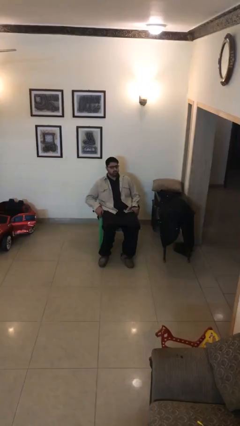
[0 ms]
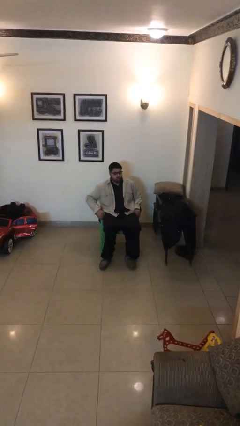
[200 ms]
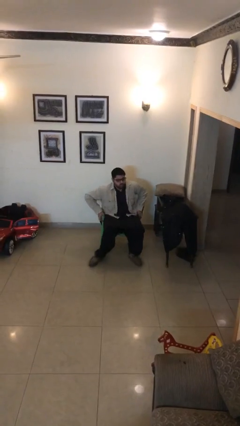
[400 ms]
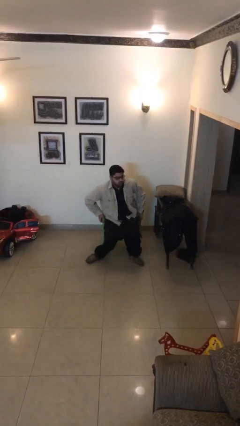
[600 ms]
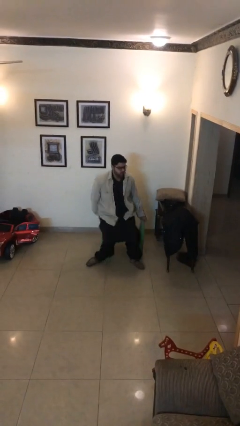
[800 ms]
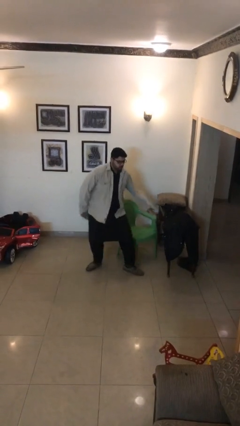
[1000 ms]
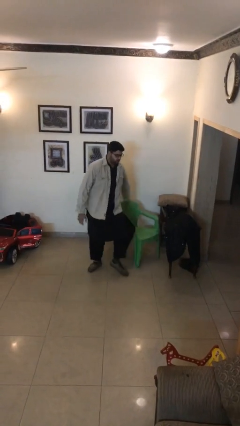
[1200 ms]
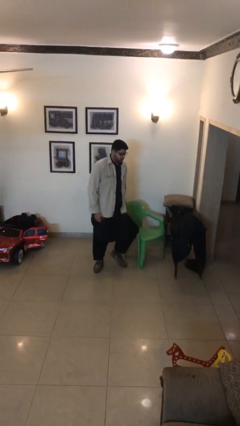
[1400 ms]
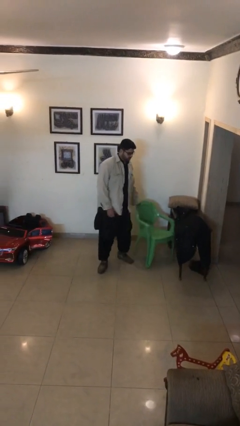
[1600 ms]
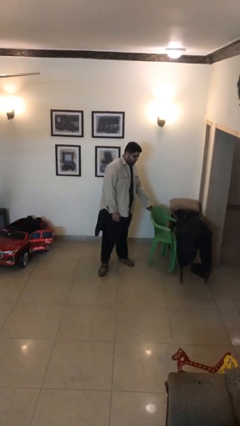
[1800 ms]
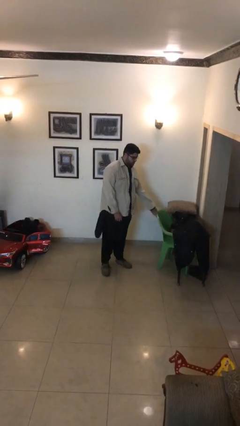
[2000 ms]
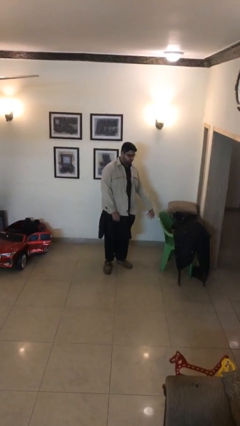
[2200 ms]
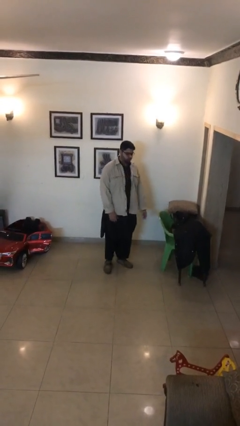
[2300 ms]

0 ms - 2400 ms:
person stands up

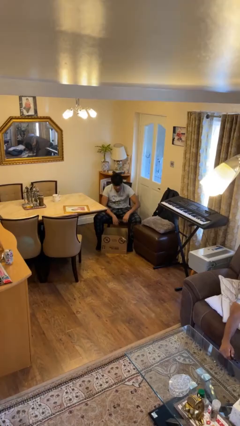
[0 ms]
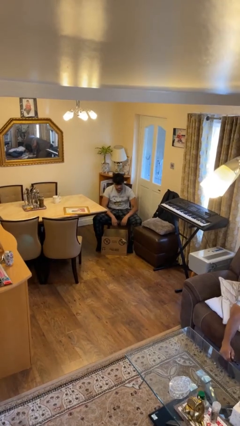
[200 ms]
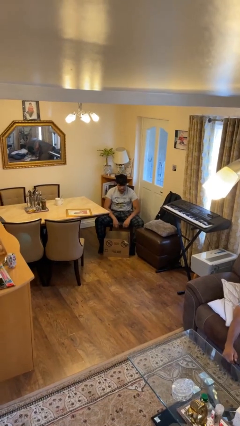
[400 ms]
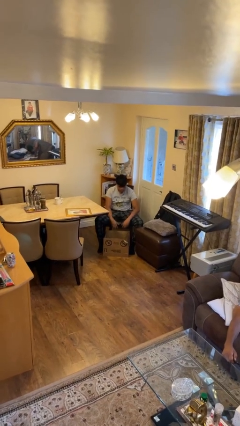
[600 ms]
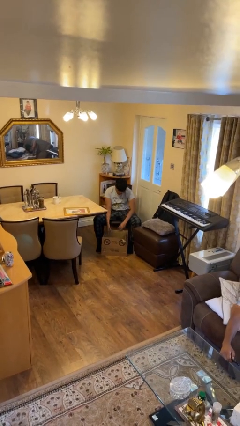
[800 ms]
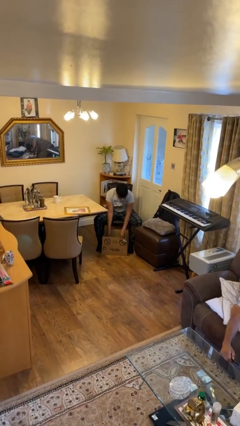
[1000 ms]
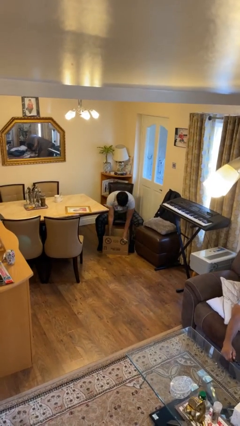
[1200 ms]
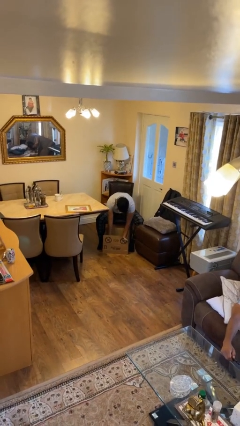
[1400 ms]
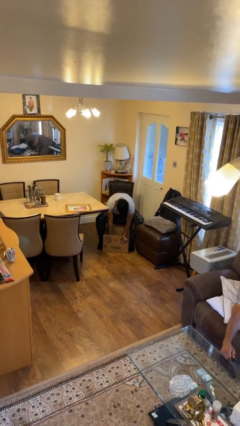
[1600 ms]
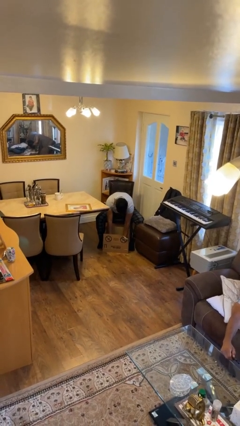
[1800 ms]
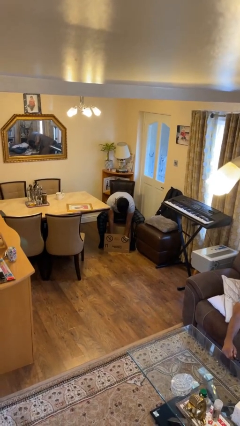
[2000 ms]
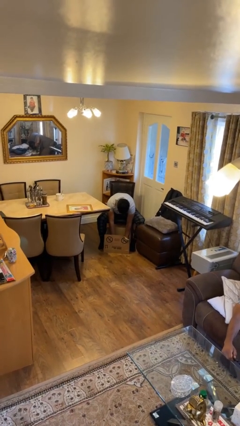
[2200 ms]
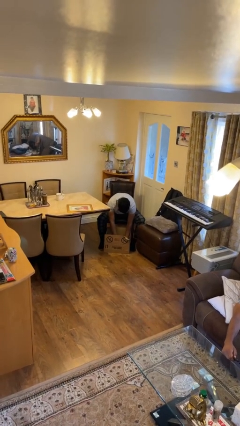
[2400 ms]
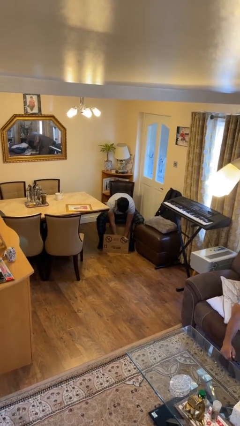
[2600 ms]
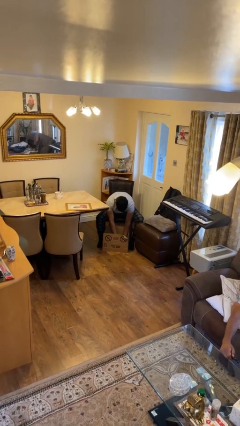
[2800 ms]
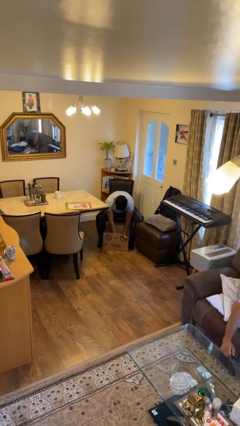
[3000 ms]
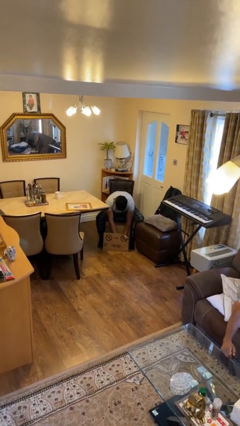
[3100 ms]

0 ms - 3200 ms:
person searches in box

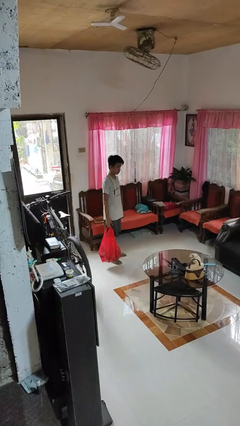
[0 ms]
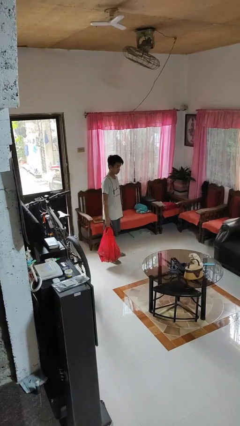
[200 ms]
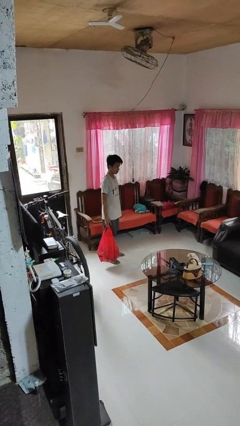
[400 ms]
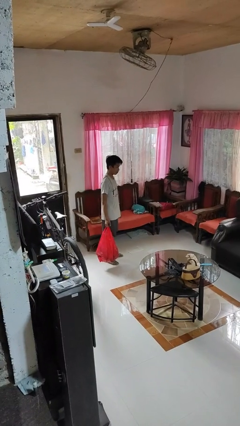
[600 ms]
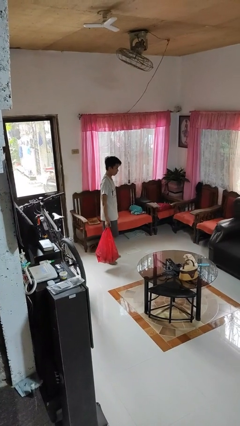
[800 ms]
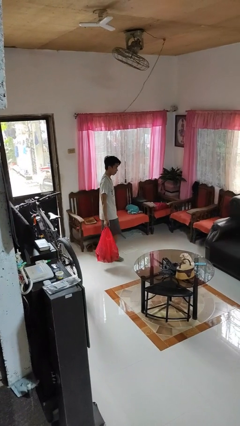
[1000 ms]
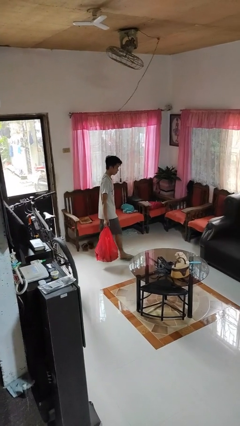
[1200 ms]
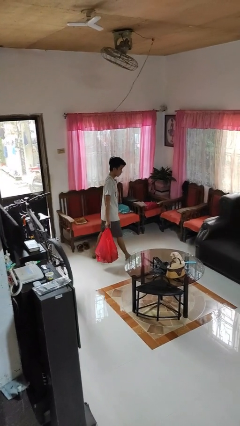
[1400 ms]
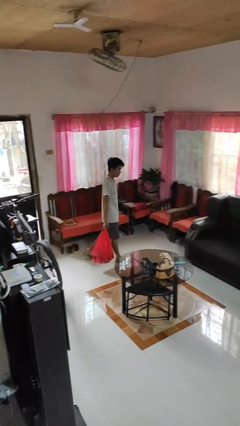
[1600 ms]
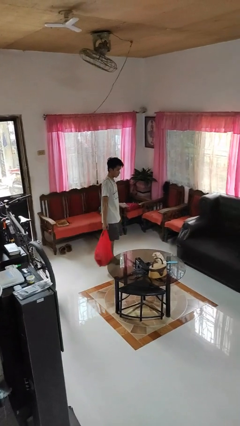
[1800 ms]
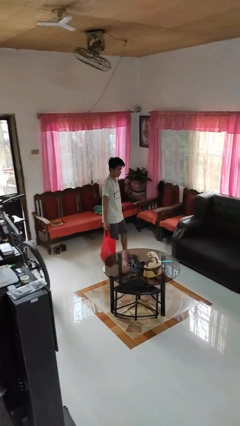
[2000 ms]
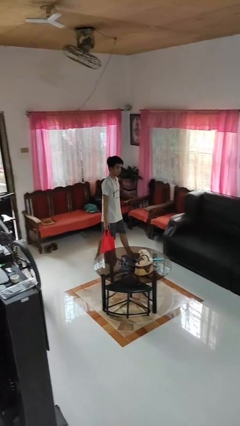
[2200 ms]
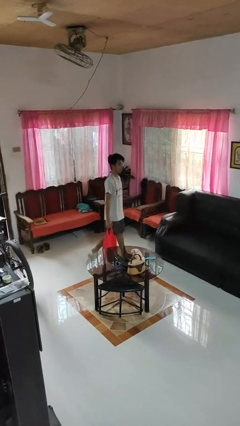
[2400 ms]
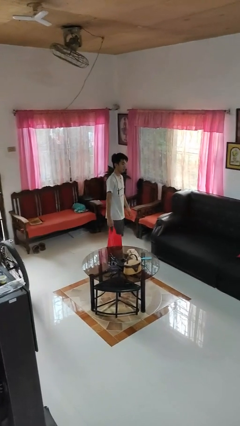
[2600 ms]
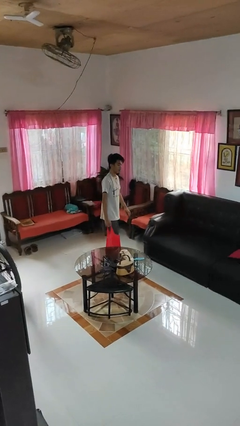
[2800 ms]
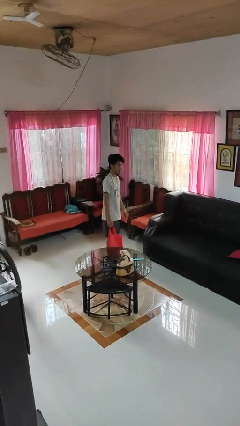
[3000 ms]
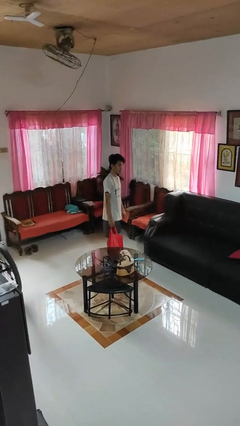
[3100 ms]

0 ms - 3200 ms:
person carries groceries

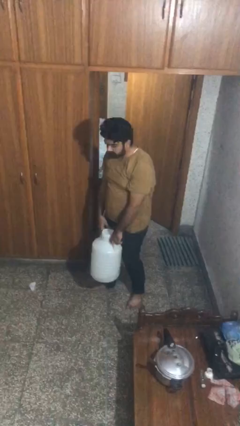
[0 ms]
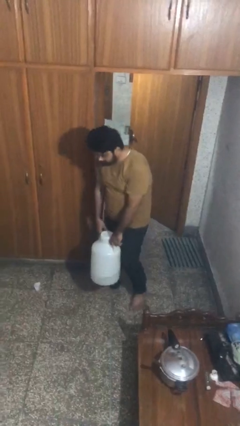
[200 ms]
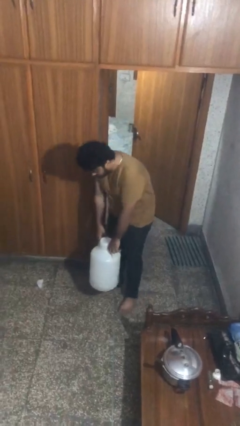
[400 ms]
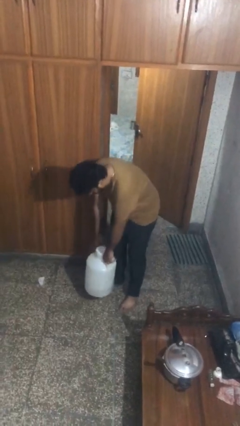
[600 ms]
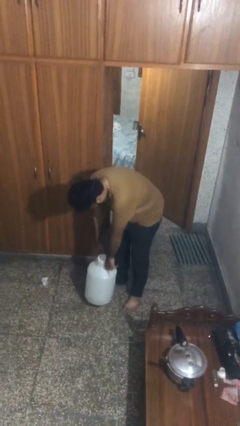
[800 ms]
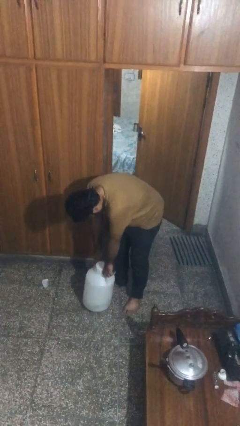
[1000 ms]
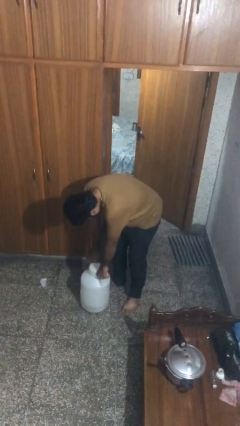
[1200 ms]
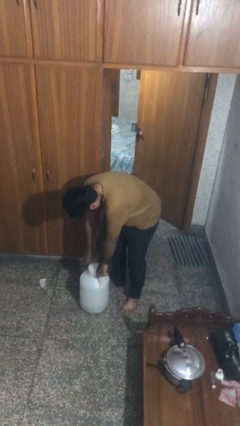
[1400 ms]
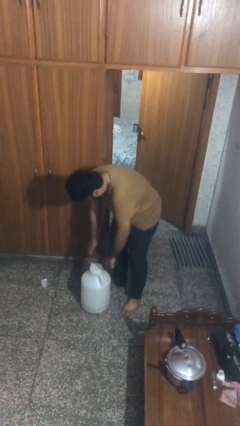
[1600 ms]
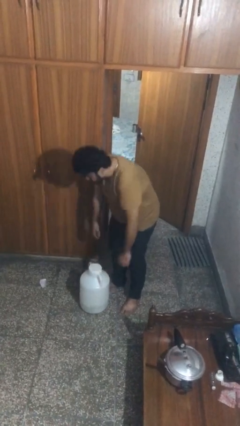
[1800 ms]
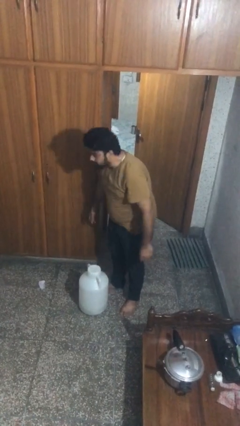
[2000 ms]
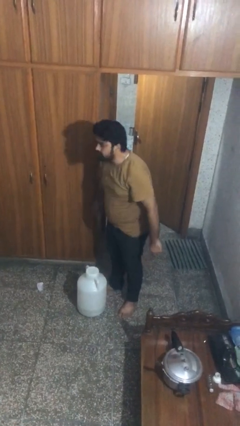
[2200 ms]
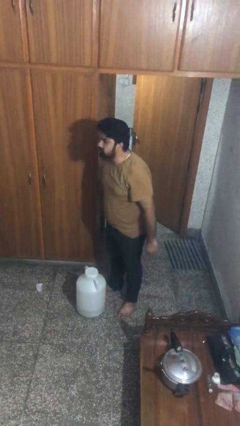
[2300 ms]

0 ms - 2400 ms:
person puts down object on floor

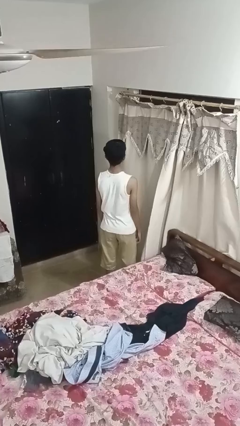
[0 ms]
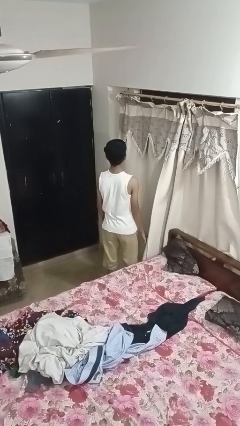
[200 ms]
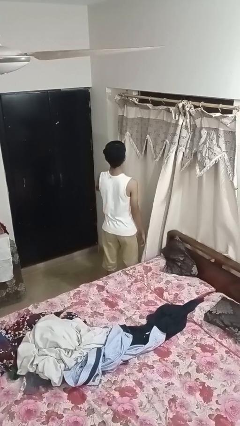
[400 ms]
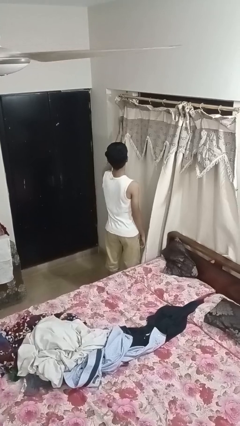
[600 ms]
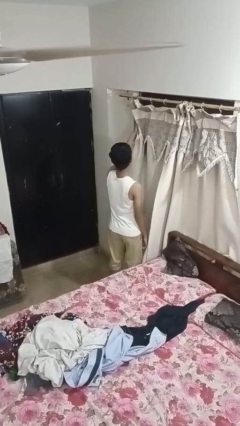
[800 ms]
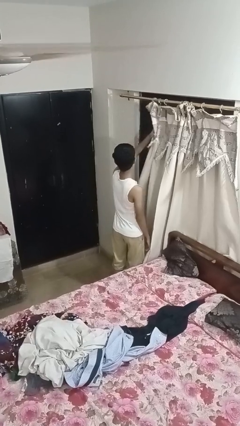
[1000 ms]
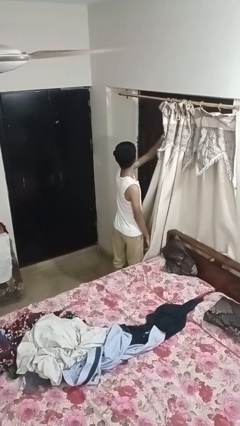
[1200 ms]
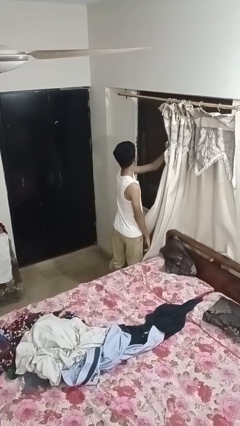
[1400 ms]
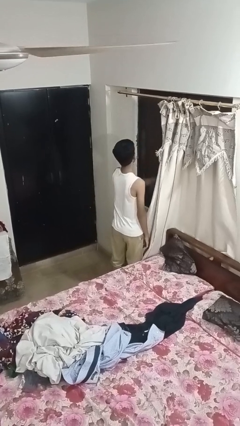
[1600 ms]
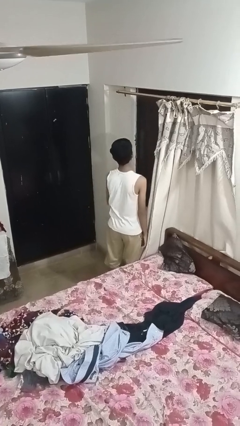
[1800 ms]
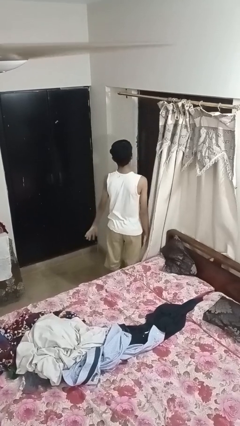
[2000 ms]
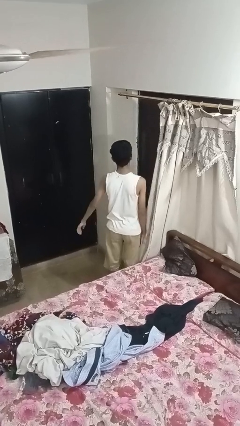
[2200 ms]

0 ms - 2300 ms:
person opens curtains

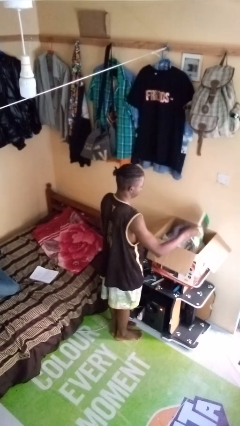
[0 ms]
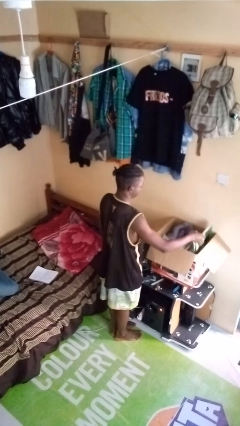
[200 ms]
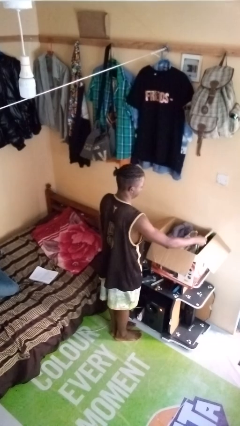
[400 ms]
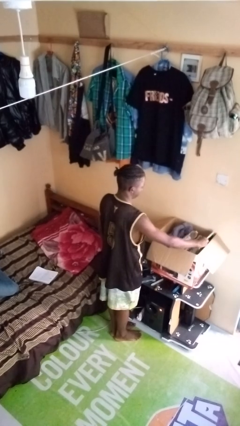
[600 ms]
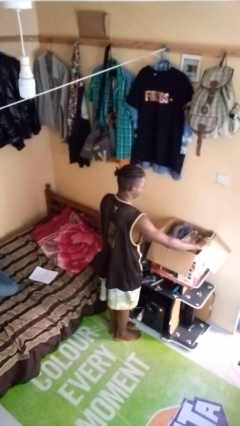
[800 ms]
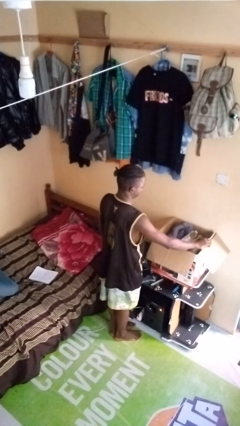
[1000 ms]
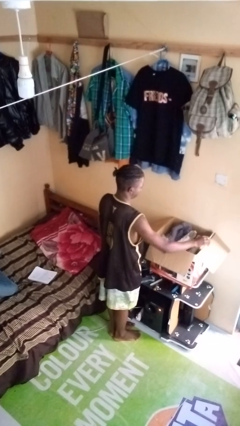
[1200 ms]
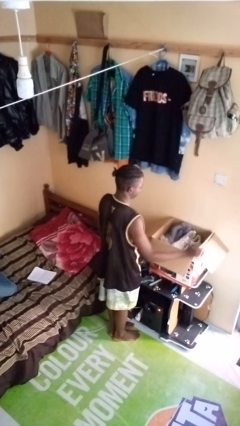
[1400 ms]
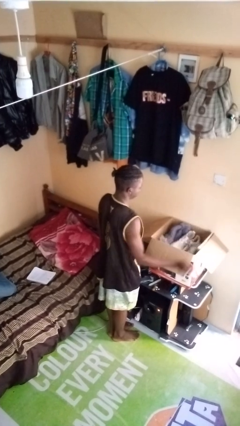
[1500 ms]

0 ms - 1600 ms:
person puts object into box

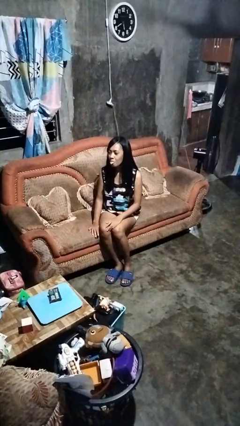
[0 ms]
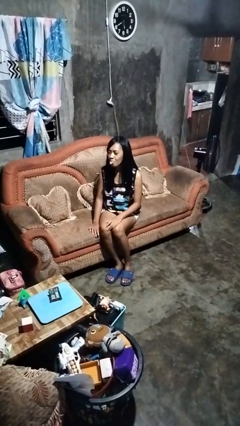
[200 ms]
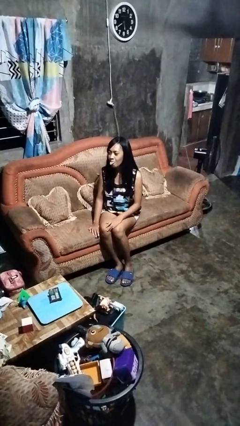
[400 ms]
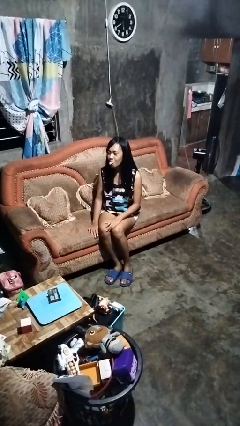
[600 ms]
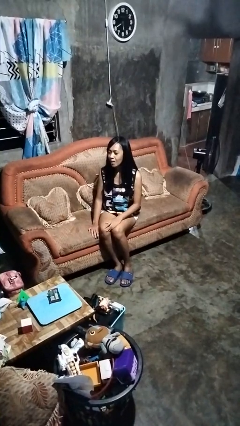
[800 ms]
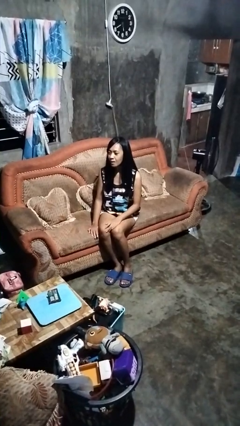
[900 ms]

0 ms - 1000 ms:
person sticks out tongue

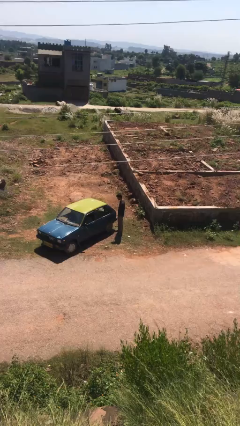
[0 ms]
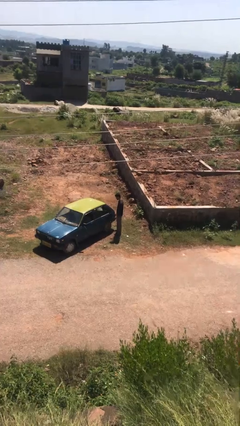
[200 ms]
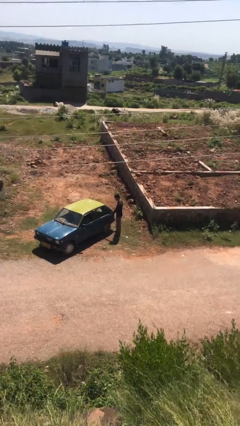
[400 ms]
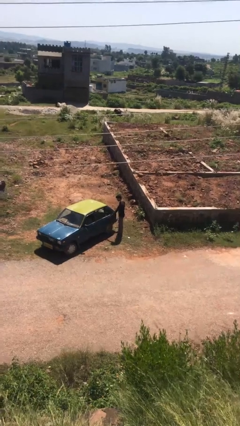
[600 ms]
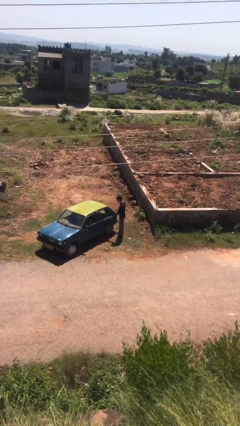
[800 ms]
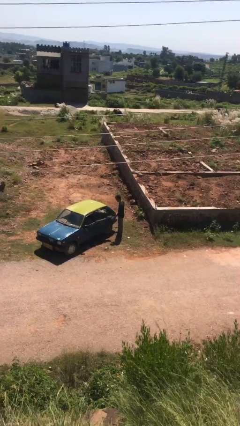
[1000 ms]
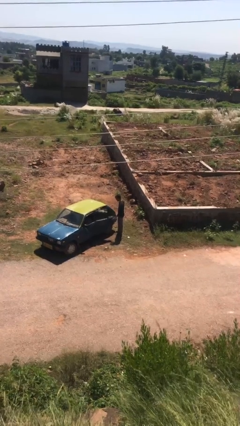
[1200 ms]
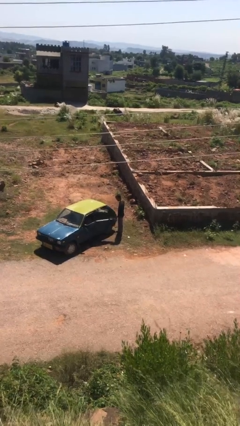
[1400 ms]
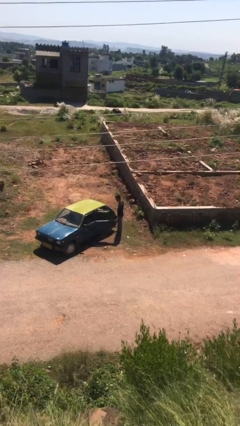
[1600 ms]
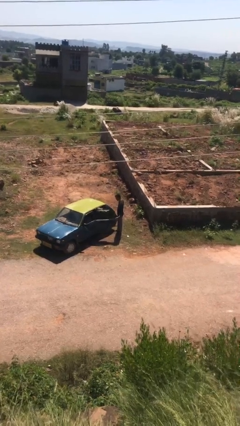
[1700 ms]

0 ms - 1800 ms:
person opens car door
